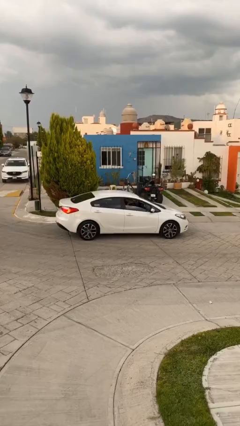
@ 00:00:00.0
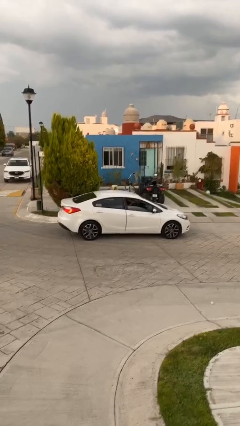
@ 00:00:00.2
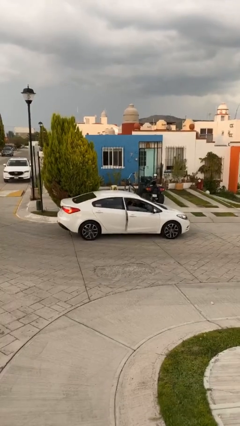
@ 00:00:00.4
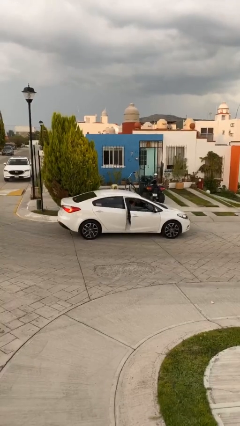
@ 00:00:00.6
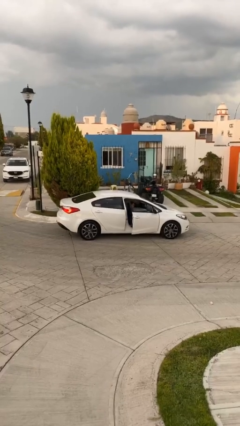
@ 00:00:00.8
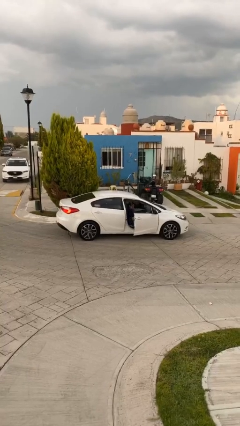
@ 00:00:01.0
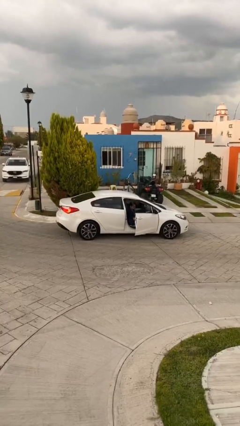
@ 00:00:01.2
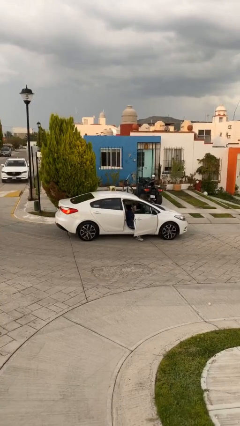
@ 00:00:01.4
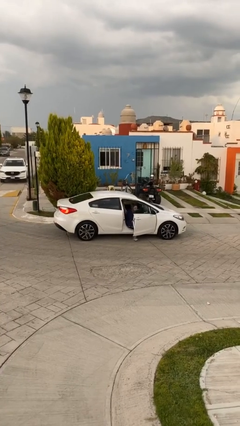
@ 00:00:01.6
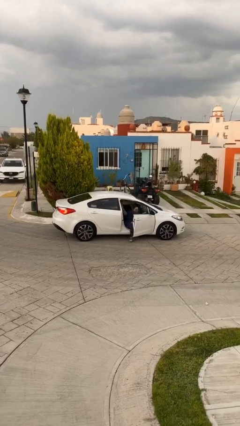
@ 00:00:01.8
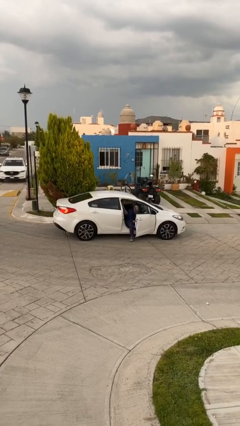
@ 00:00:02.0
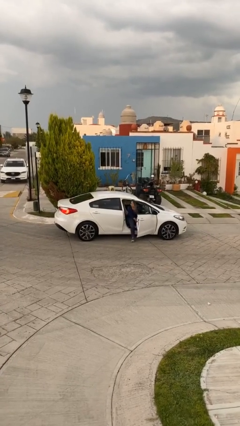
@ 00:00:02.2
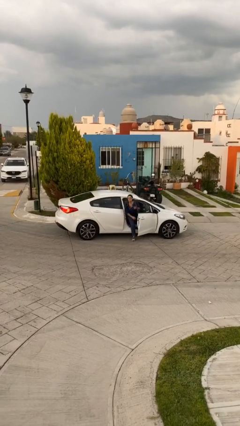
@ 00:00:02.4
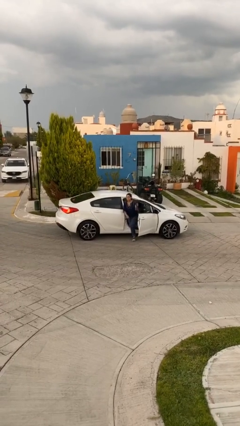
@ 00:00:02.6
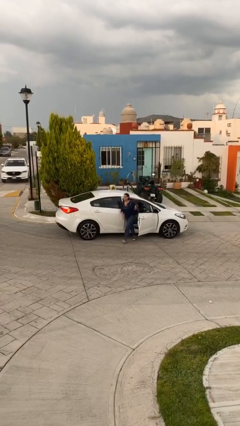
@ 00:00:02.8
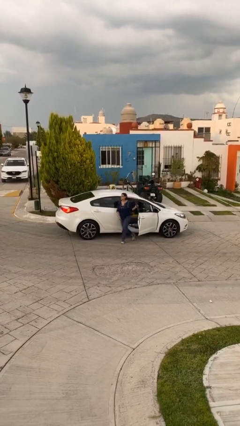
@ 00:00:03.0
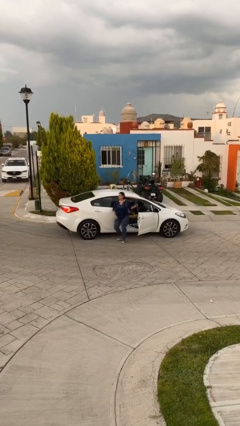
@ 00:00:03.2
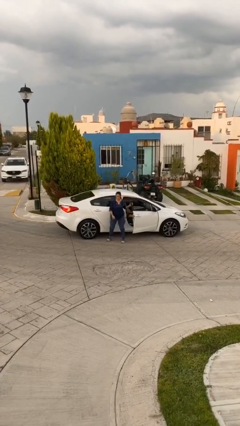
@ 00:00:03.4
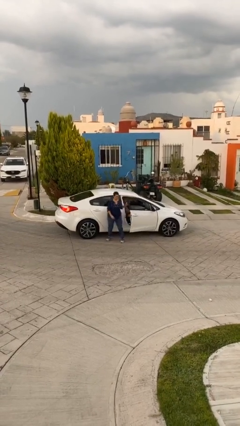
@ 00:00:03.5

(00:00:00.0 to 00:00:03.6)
car drops off person

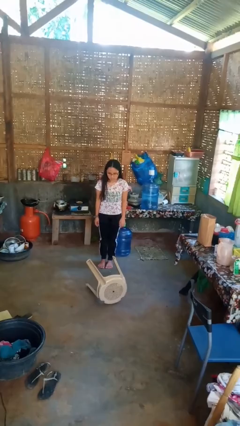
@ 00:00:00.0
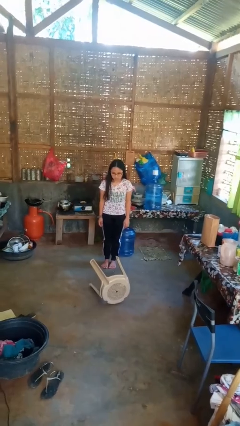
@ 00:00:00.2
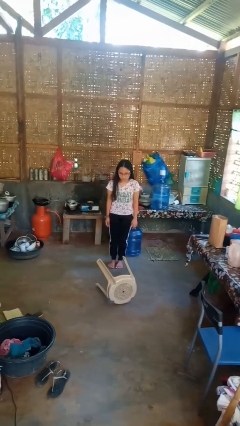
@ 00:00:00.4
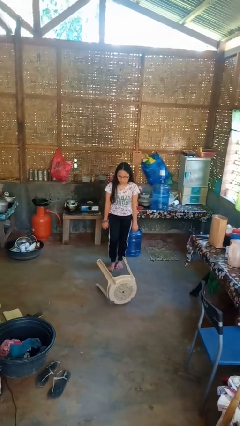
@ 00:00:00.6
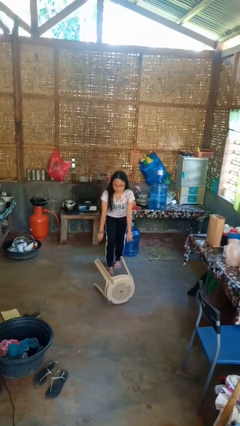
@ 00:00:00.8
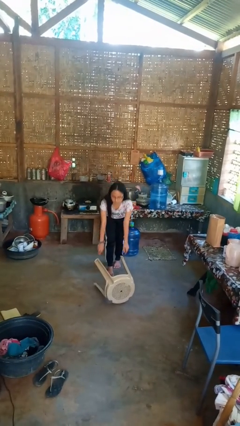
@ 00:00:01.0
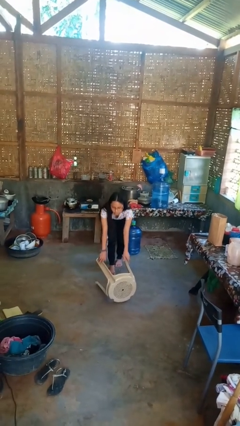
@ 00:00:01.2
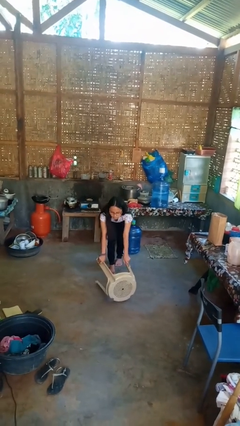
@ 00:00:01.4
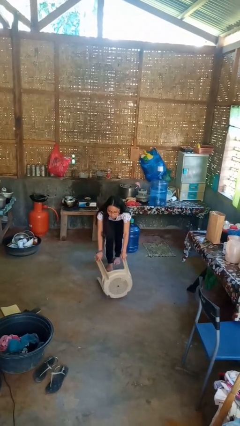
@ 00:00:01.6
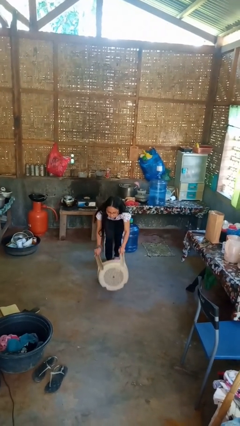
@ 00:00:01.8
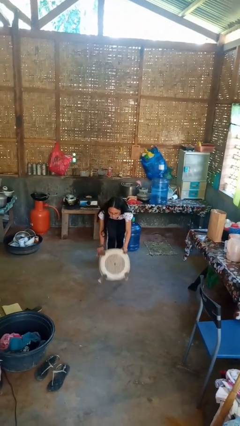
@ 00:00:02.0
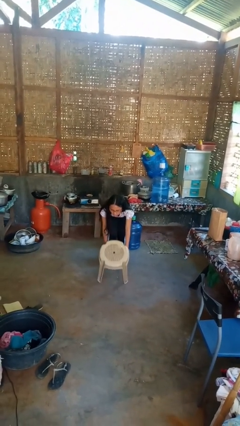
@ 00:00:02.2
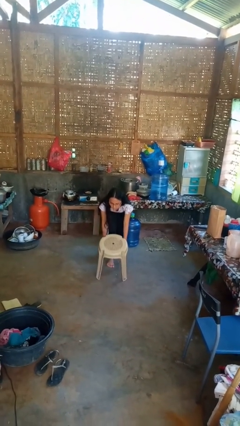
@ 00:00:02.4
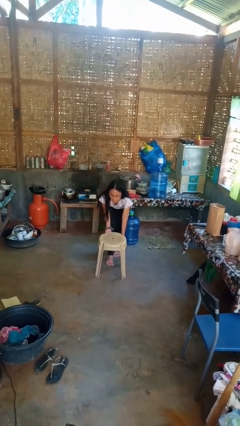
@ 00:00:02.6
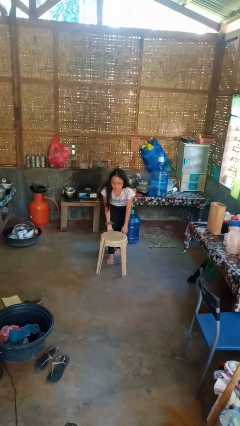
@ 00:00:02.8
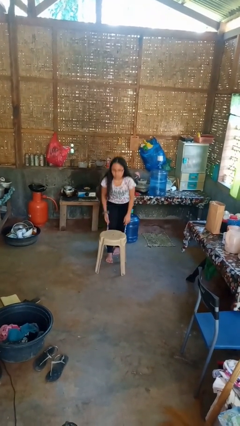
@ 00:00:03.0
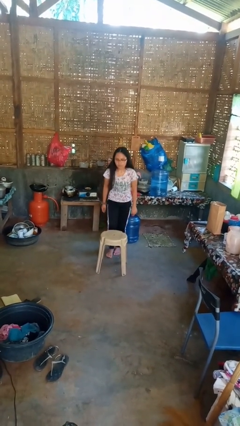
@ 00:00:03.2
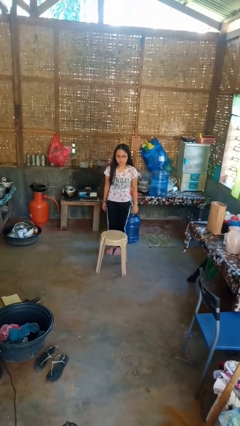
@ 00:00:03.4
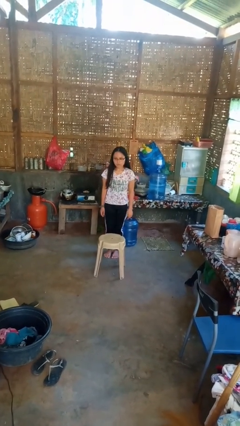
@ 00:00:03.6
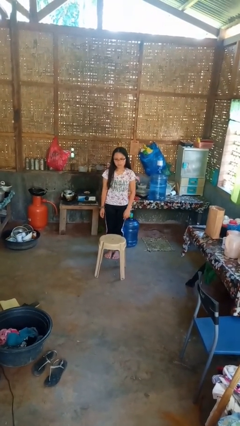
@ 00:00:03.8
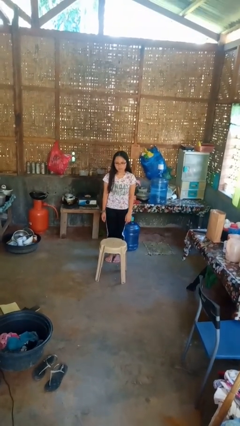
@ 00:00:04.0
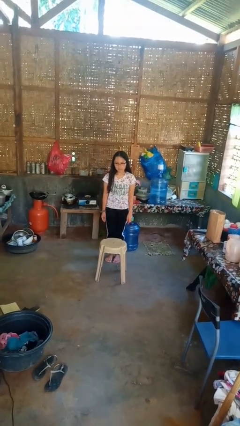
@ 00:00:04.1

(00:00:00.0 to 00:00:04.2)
person sets upright furniture

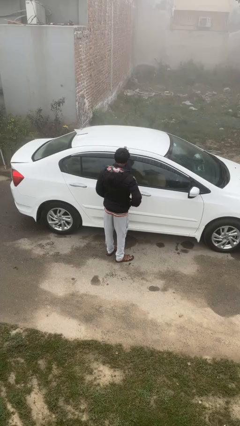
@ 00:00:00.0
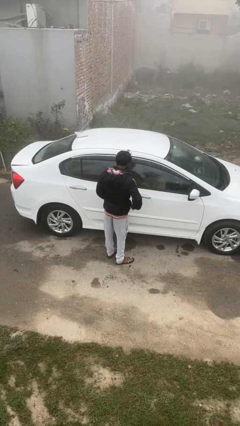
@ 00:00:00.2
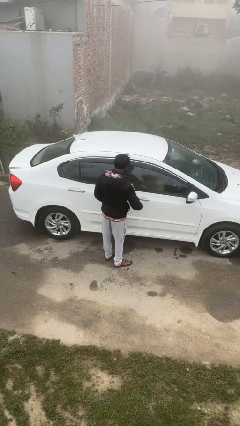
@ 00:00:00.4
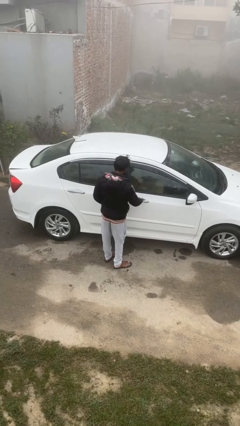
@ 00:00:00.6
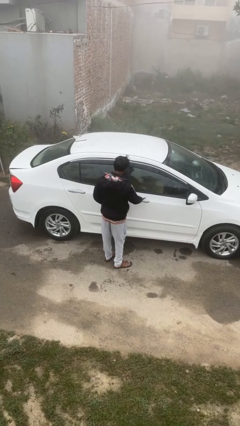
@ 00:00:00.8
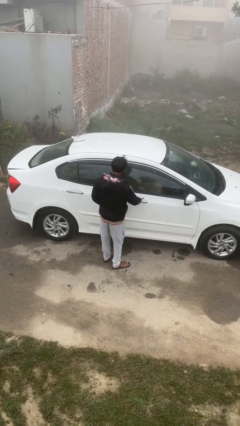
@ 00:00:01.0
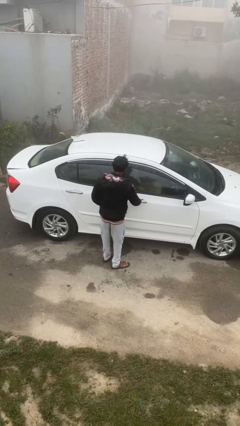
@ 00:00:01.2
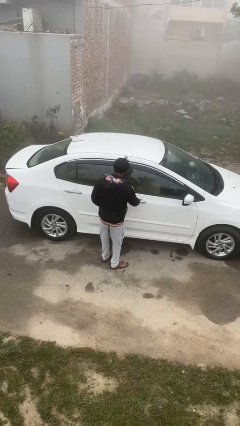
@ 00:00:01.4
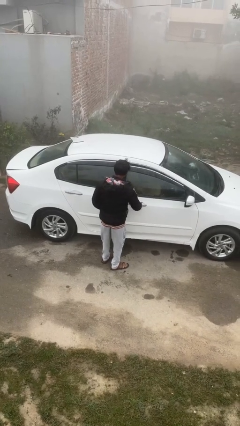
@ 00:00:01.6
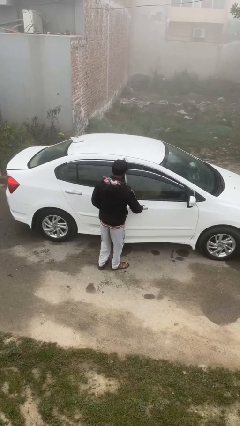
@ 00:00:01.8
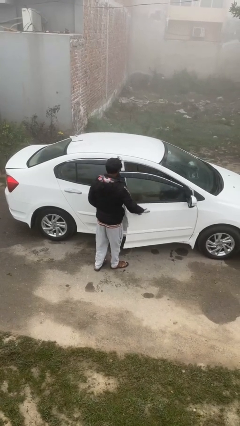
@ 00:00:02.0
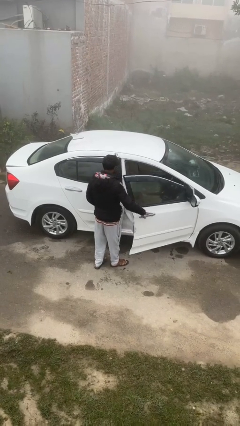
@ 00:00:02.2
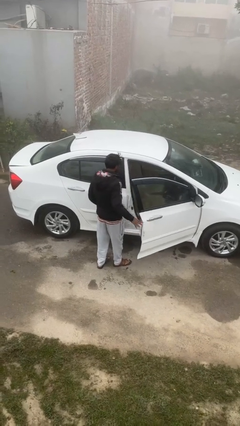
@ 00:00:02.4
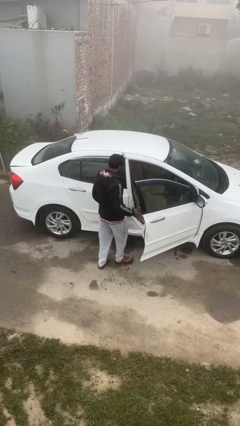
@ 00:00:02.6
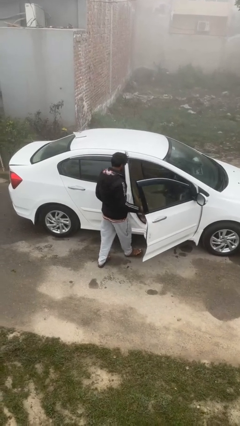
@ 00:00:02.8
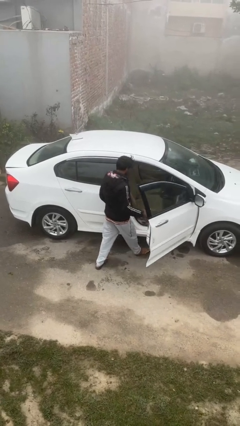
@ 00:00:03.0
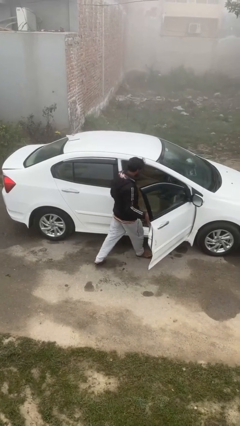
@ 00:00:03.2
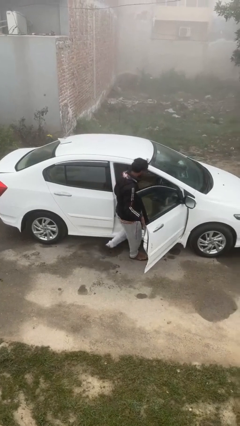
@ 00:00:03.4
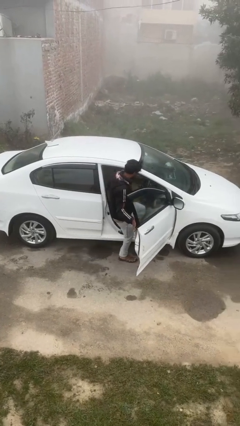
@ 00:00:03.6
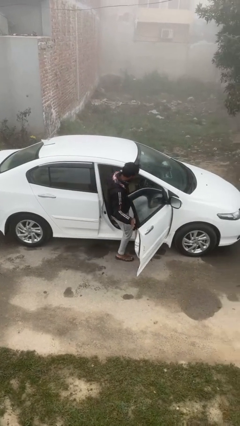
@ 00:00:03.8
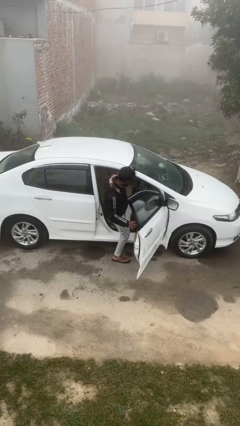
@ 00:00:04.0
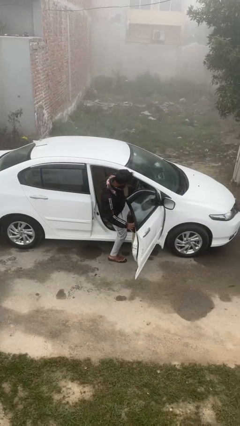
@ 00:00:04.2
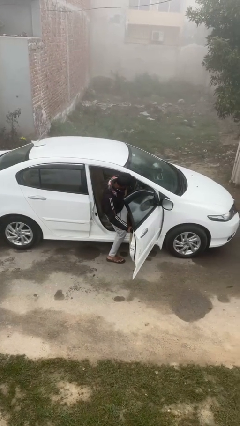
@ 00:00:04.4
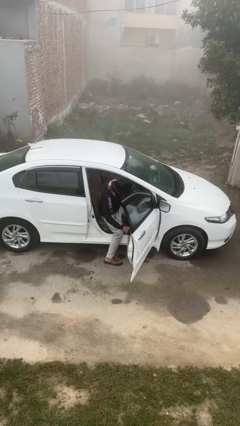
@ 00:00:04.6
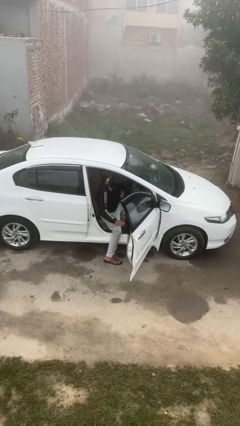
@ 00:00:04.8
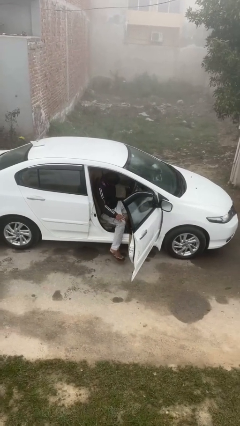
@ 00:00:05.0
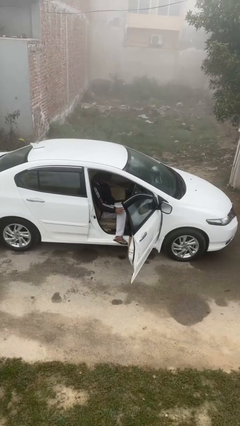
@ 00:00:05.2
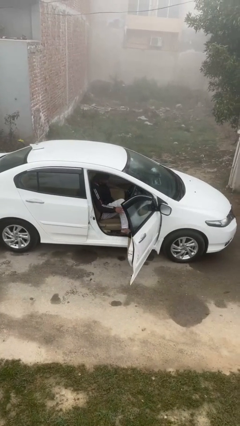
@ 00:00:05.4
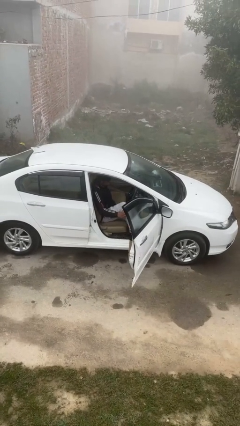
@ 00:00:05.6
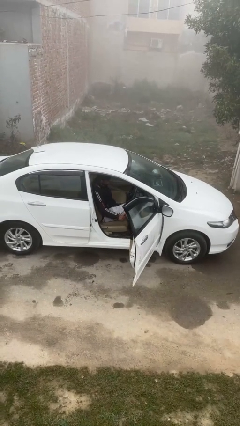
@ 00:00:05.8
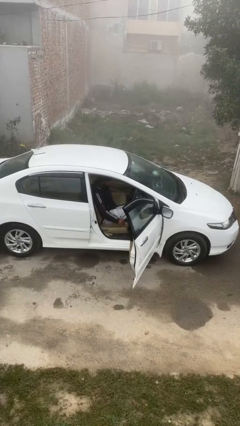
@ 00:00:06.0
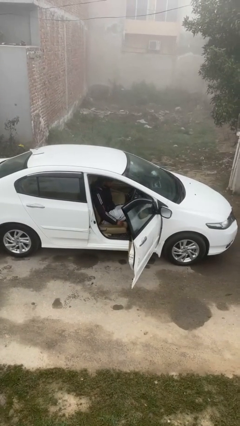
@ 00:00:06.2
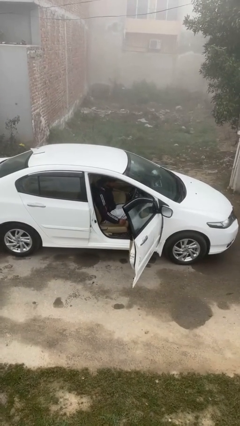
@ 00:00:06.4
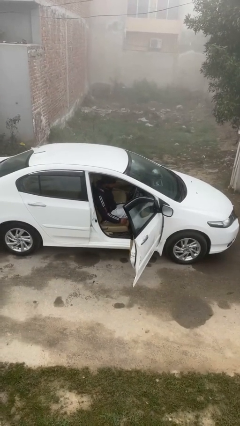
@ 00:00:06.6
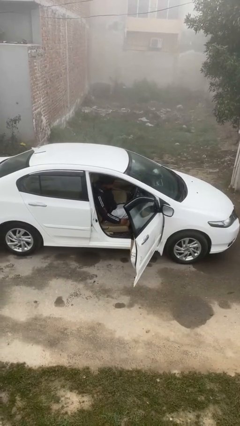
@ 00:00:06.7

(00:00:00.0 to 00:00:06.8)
person enters car

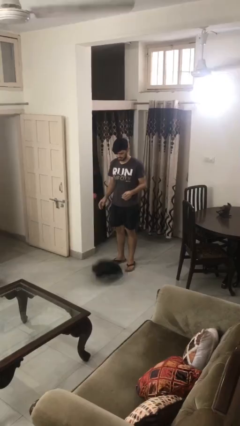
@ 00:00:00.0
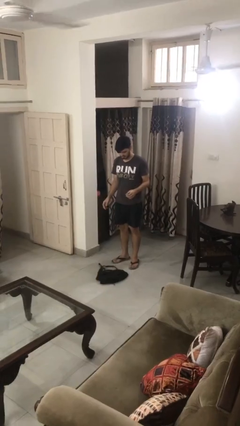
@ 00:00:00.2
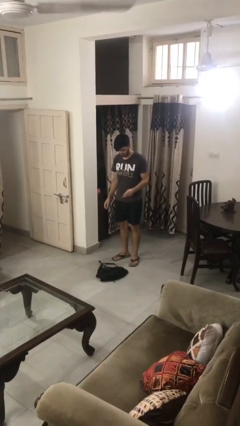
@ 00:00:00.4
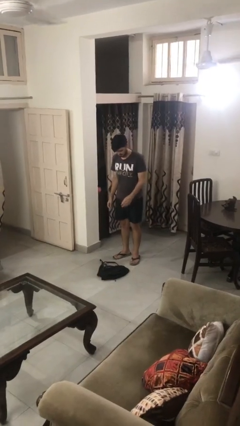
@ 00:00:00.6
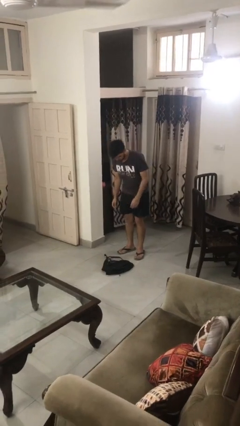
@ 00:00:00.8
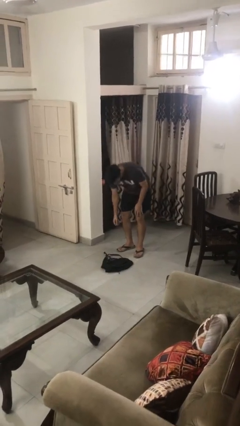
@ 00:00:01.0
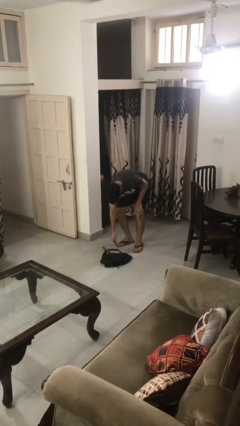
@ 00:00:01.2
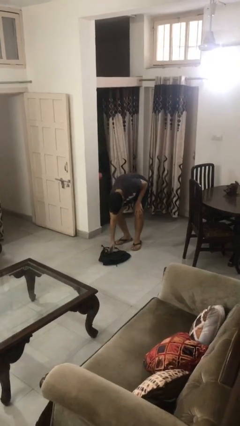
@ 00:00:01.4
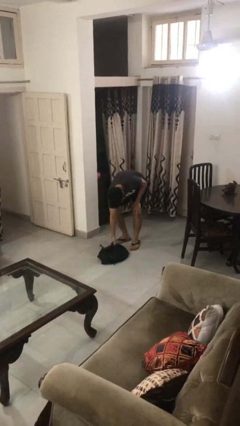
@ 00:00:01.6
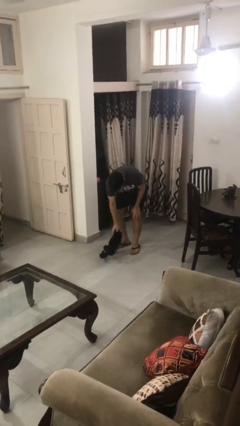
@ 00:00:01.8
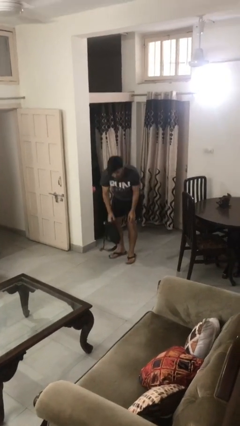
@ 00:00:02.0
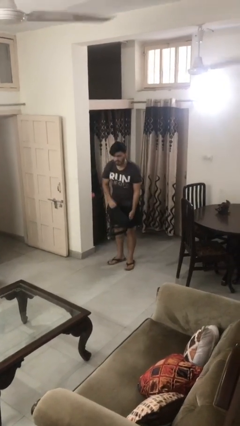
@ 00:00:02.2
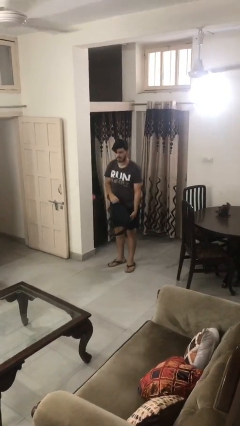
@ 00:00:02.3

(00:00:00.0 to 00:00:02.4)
person picks up object from floor

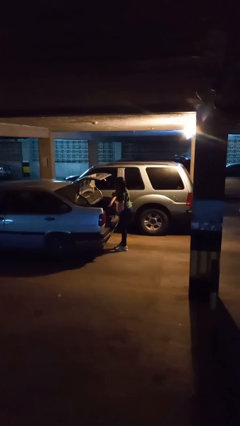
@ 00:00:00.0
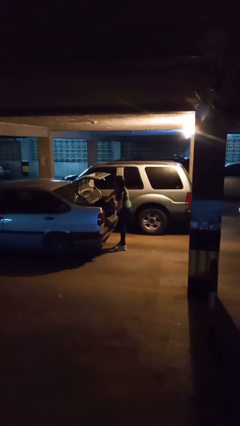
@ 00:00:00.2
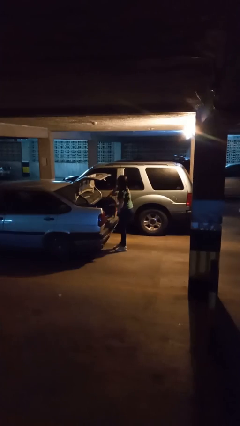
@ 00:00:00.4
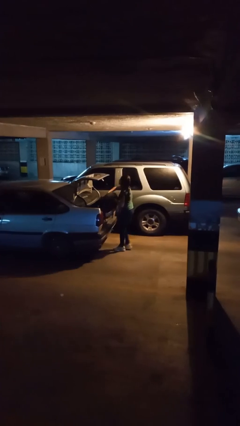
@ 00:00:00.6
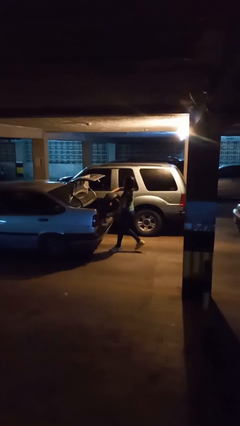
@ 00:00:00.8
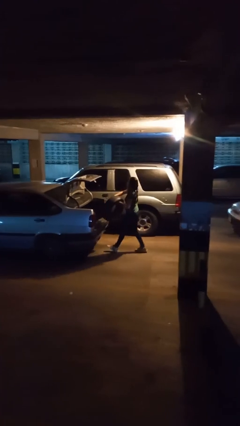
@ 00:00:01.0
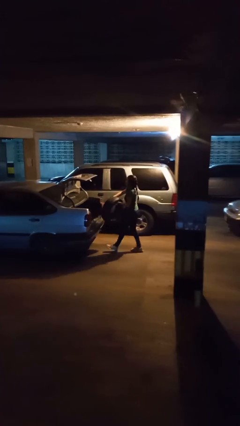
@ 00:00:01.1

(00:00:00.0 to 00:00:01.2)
person unloads car
